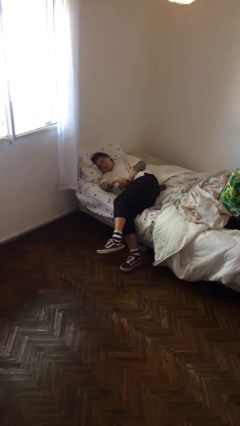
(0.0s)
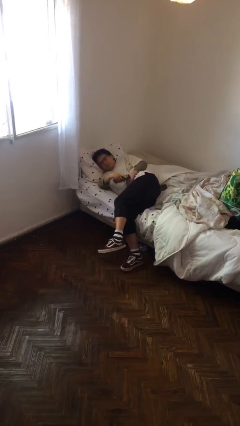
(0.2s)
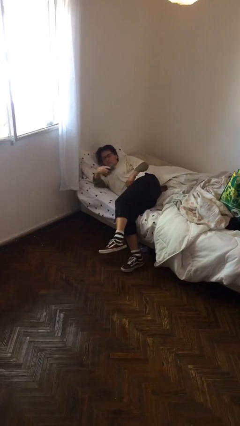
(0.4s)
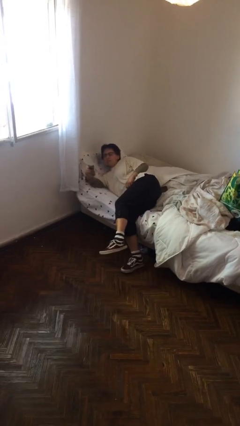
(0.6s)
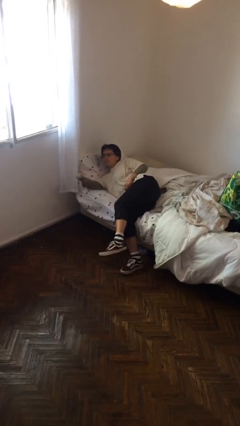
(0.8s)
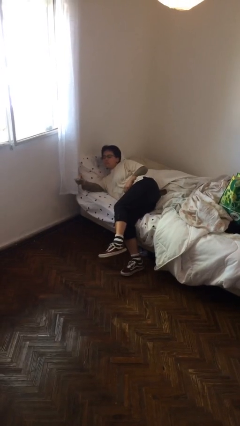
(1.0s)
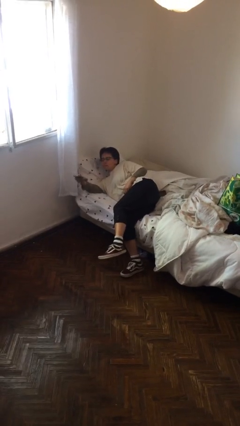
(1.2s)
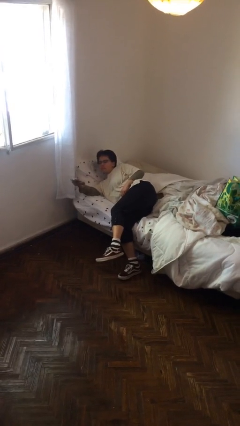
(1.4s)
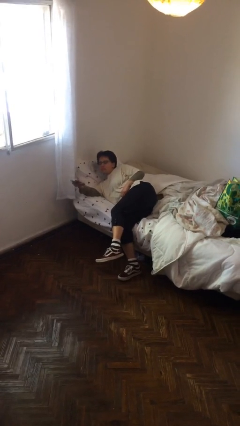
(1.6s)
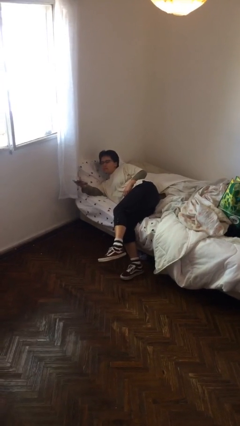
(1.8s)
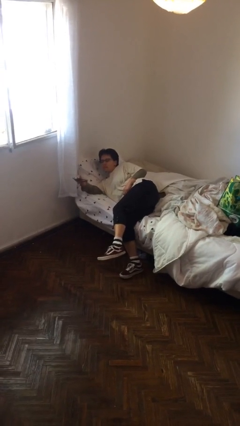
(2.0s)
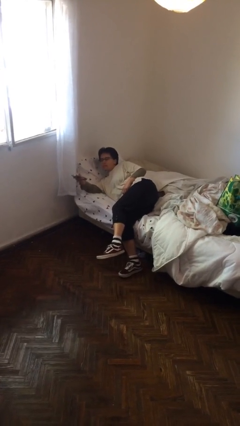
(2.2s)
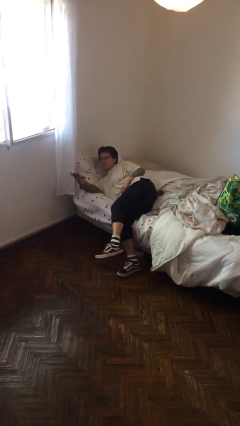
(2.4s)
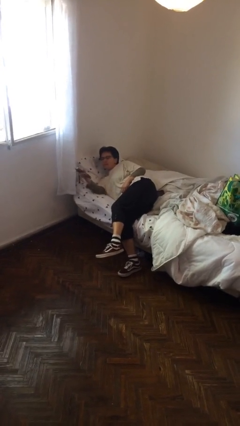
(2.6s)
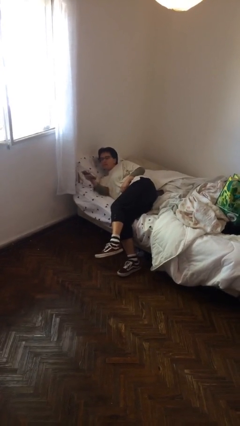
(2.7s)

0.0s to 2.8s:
person uses television remote

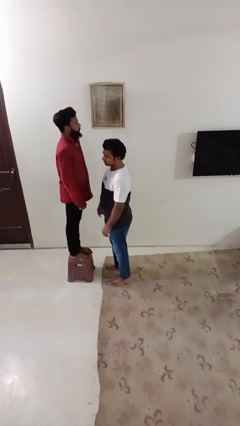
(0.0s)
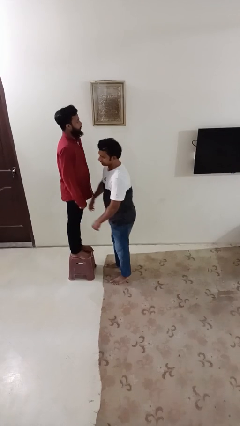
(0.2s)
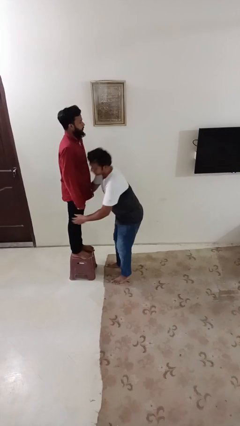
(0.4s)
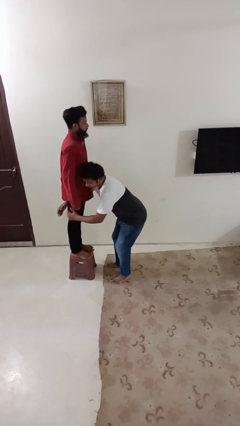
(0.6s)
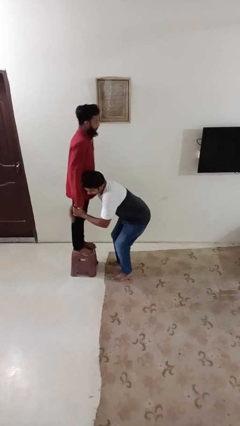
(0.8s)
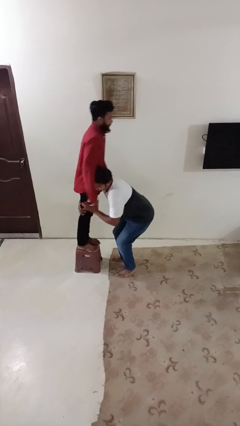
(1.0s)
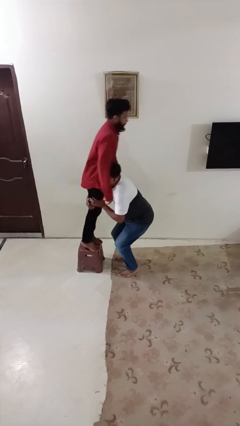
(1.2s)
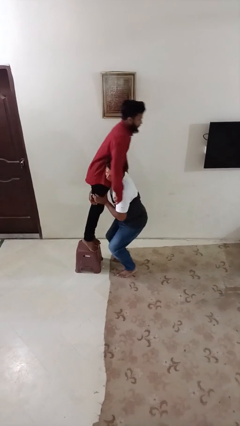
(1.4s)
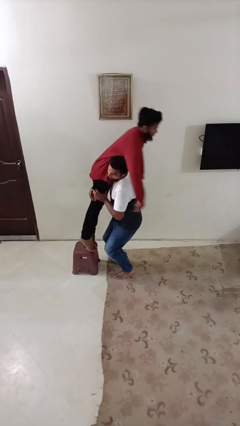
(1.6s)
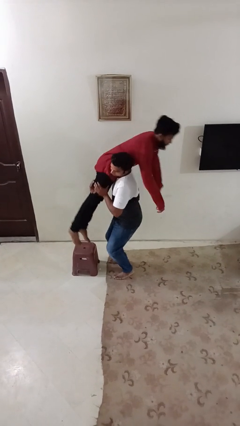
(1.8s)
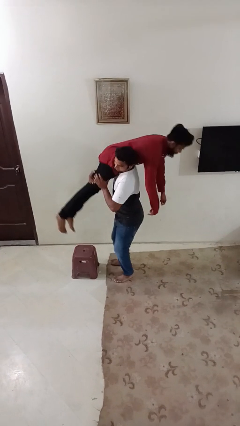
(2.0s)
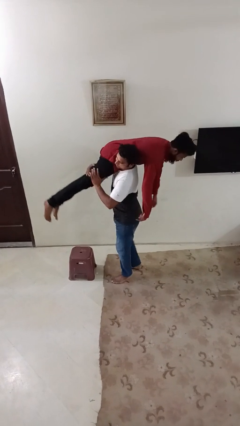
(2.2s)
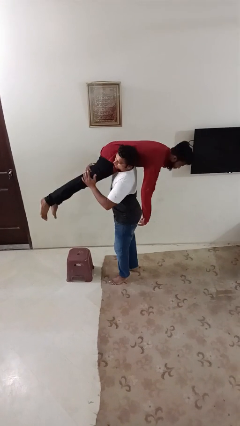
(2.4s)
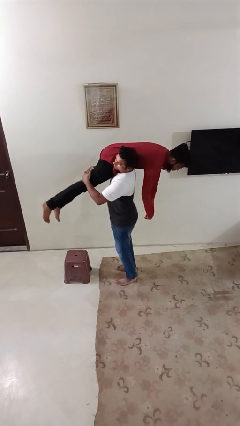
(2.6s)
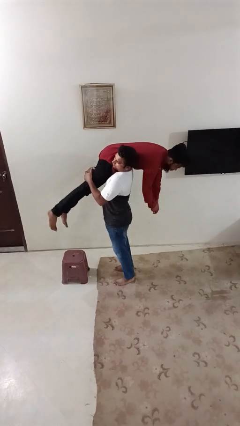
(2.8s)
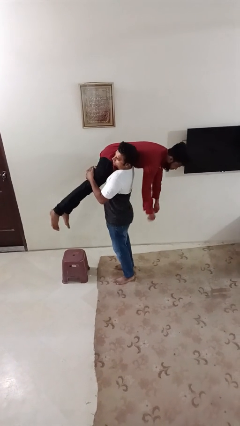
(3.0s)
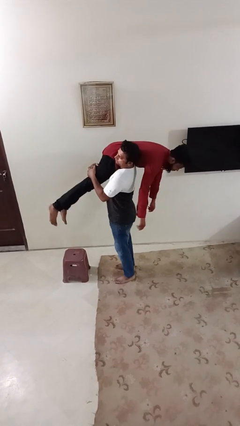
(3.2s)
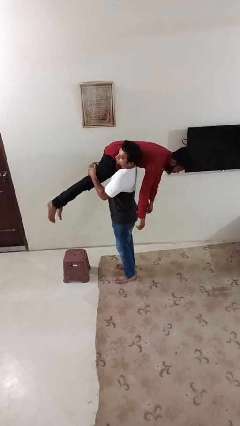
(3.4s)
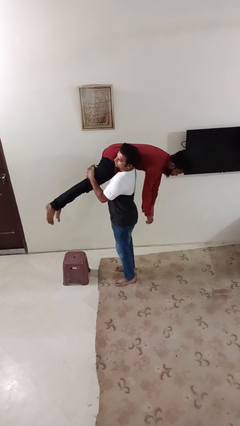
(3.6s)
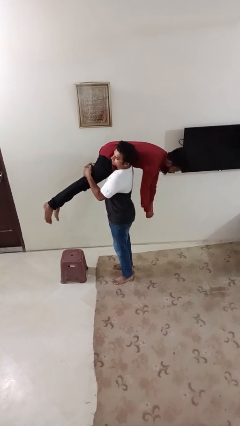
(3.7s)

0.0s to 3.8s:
person carries person over shoulder

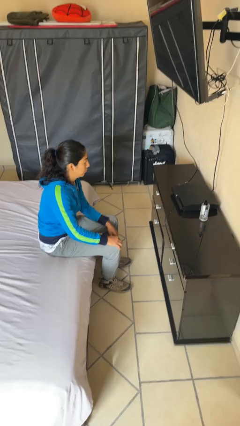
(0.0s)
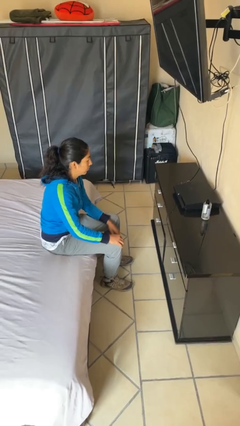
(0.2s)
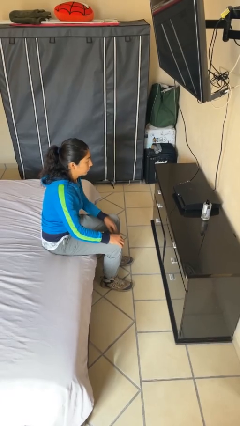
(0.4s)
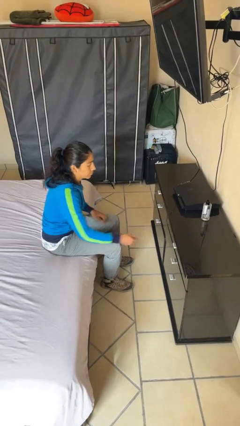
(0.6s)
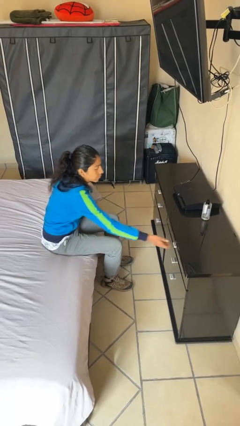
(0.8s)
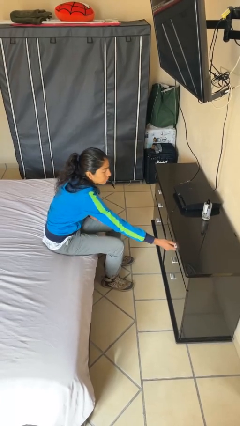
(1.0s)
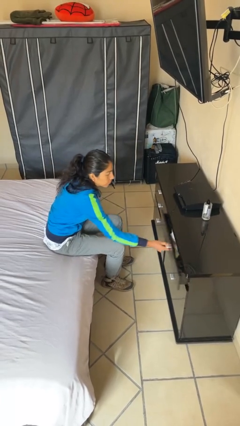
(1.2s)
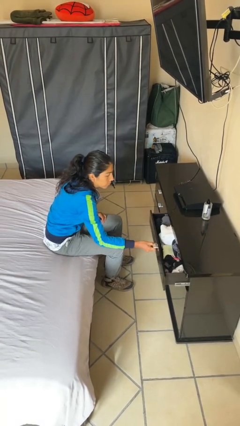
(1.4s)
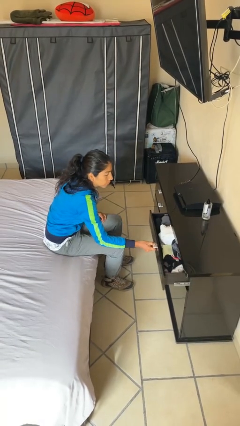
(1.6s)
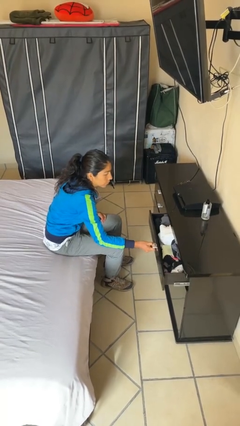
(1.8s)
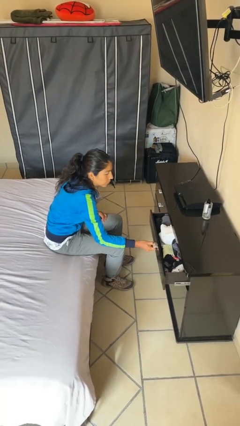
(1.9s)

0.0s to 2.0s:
person opens dresser drawer

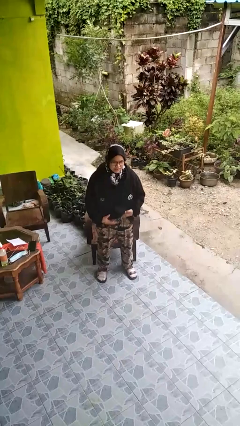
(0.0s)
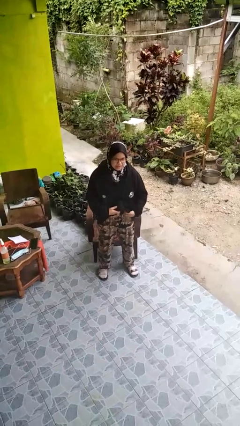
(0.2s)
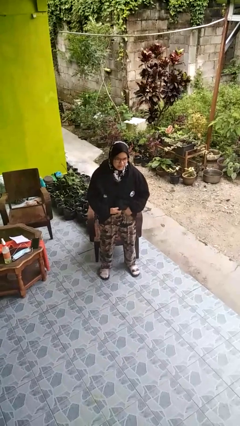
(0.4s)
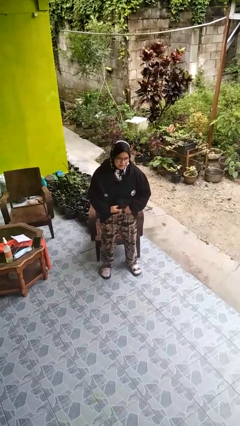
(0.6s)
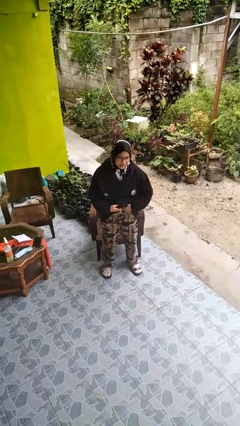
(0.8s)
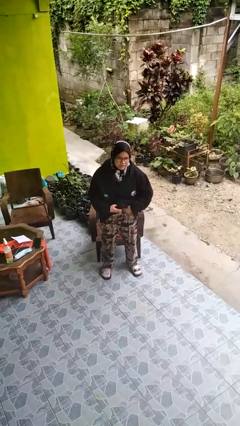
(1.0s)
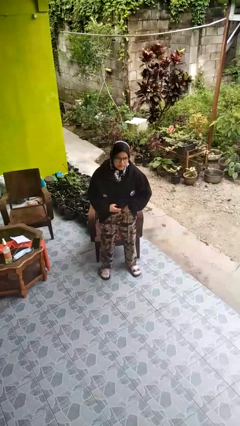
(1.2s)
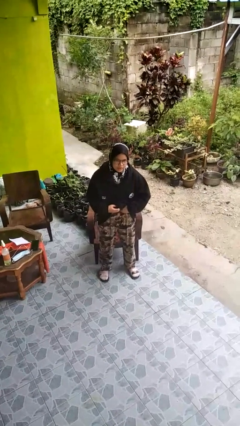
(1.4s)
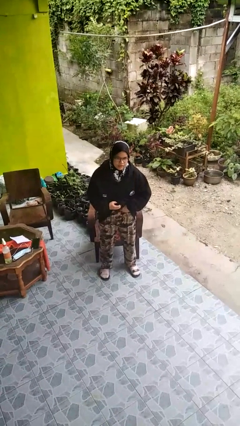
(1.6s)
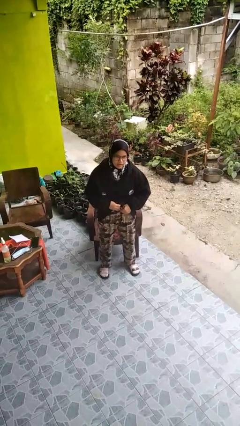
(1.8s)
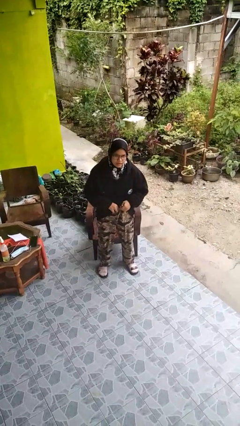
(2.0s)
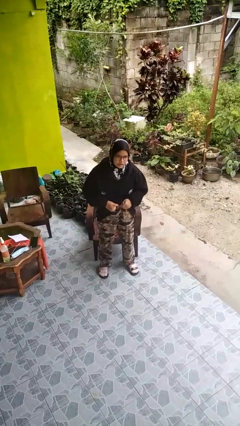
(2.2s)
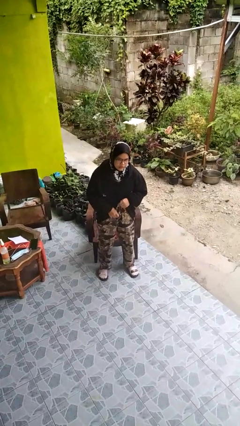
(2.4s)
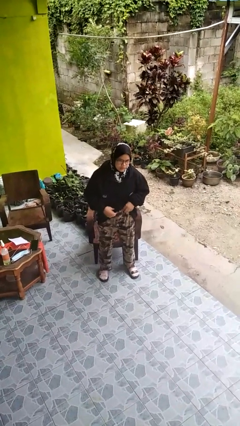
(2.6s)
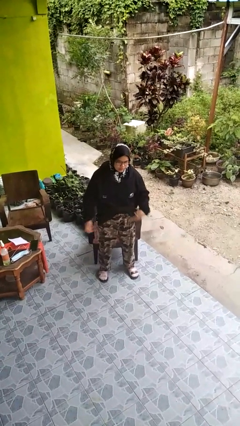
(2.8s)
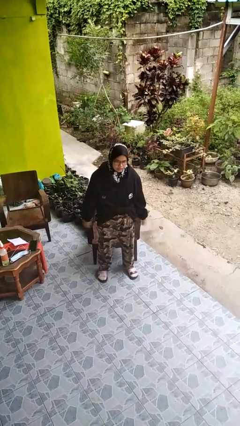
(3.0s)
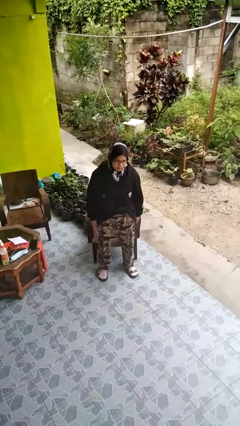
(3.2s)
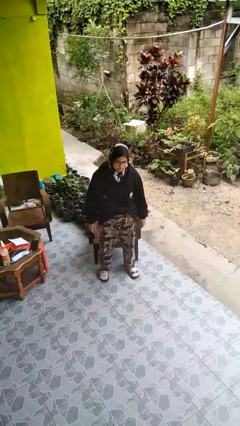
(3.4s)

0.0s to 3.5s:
person tucks in shirt

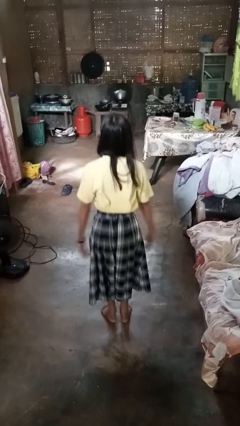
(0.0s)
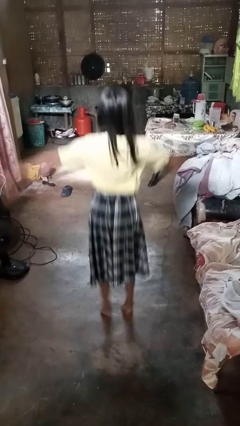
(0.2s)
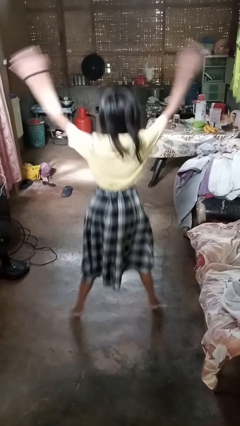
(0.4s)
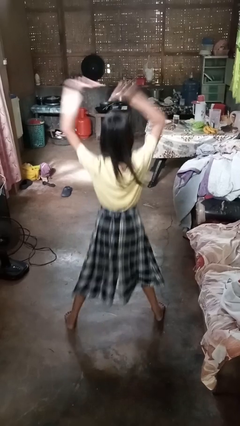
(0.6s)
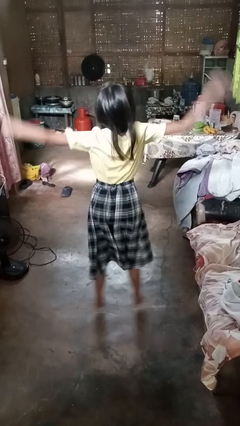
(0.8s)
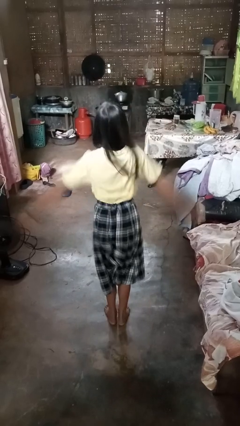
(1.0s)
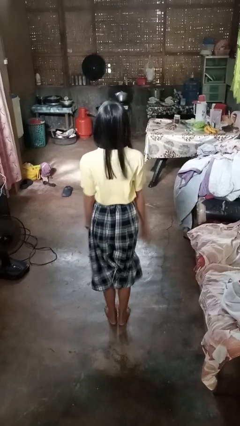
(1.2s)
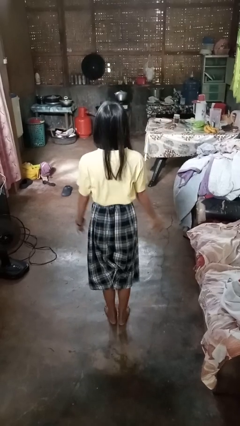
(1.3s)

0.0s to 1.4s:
person exercises with jumping jacks

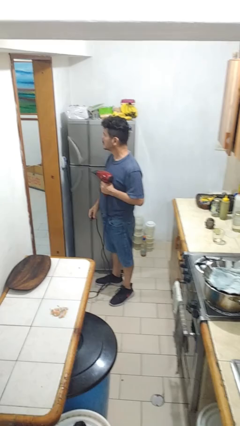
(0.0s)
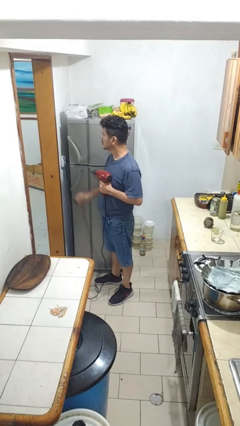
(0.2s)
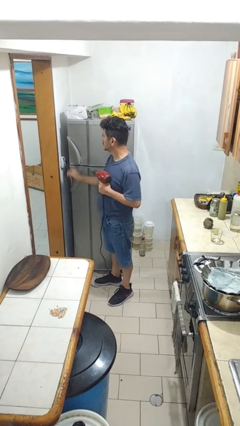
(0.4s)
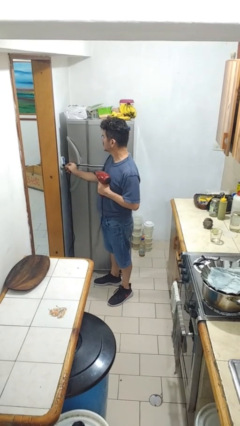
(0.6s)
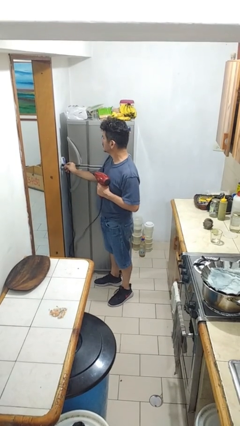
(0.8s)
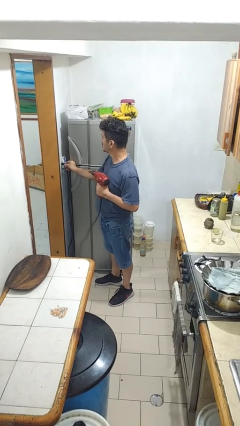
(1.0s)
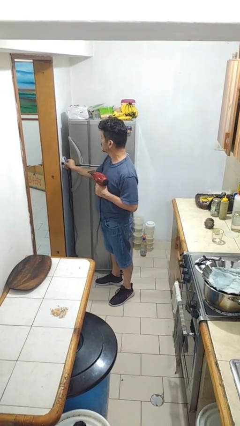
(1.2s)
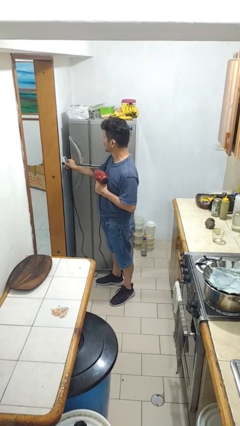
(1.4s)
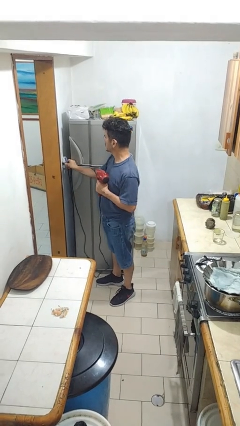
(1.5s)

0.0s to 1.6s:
person plugs into electrical socket

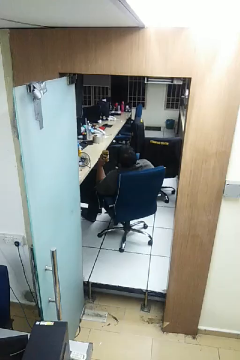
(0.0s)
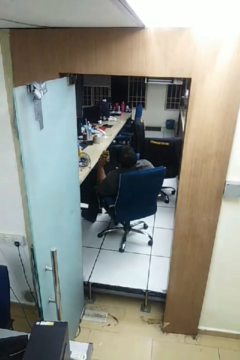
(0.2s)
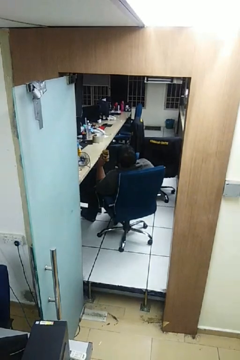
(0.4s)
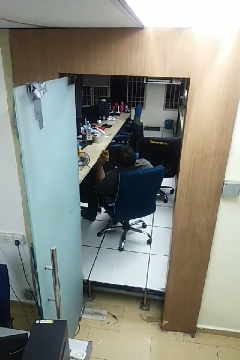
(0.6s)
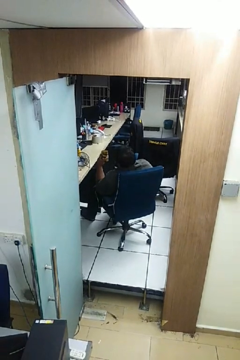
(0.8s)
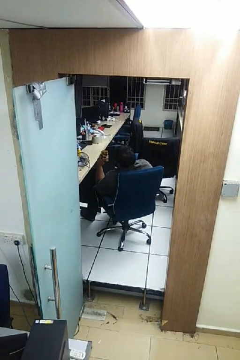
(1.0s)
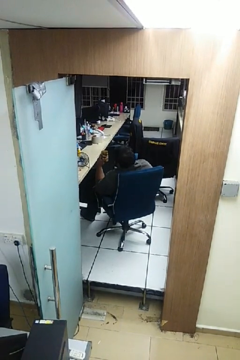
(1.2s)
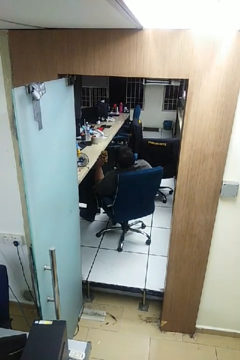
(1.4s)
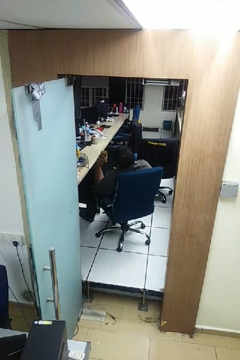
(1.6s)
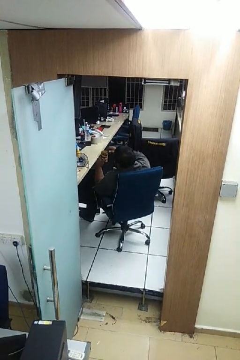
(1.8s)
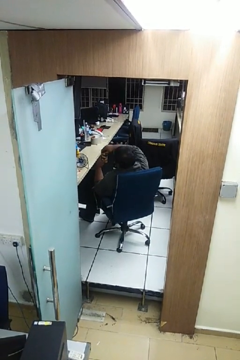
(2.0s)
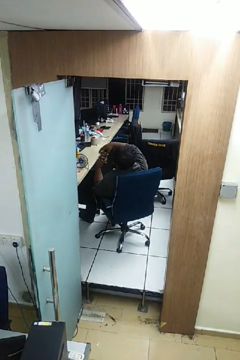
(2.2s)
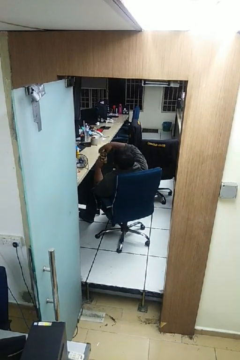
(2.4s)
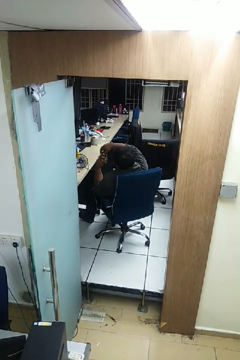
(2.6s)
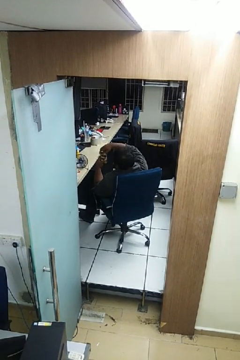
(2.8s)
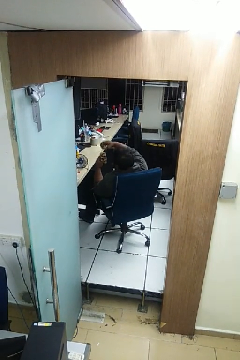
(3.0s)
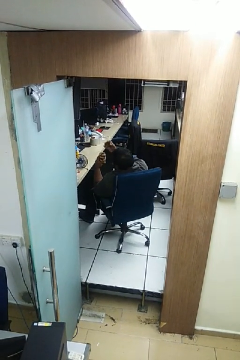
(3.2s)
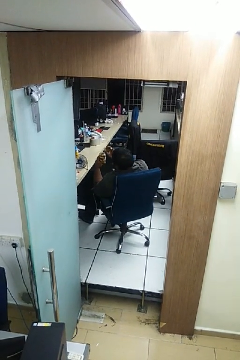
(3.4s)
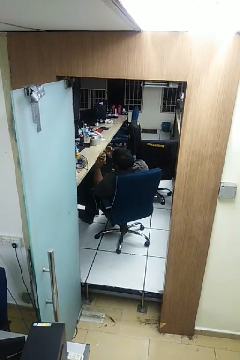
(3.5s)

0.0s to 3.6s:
person opens jar
